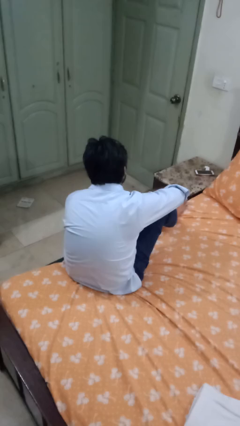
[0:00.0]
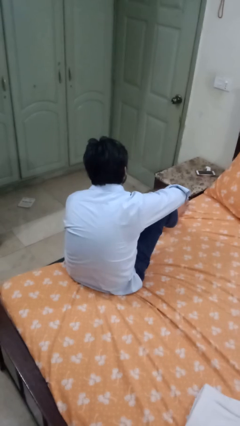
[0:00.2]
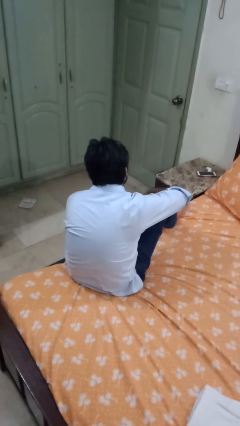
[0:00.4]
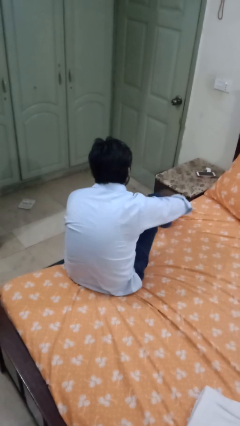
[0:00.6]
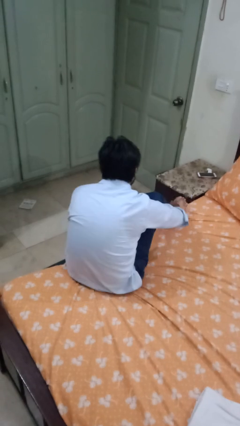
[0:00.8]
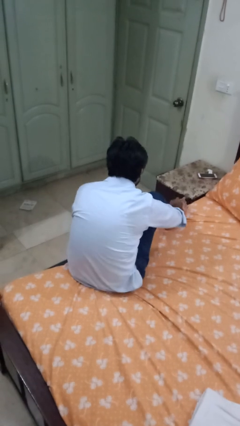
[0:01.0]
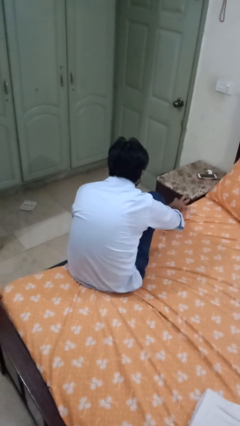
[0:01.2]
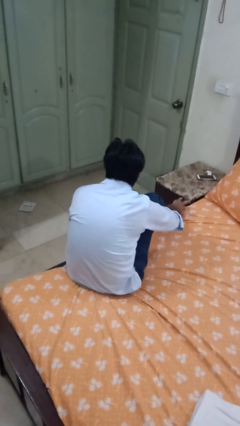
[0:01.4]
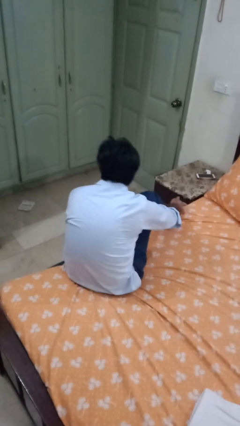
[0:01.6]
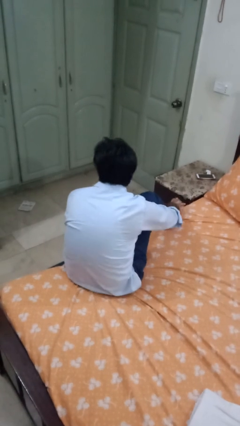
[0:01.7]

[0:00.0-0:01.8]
person rubs foot

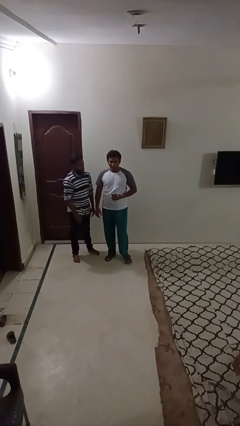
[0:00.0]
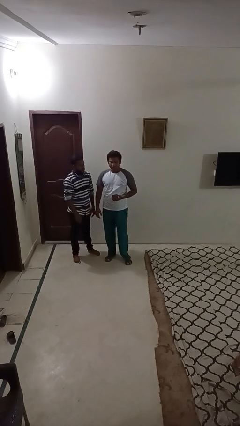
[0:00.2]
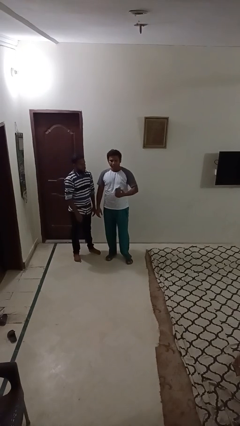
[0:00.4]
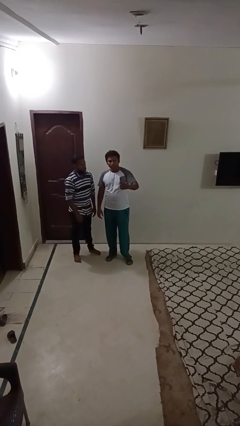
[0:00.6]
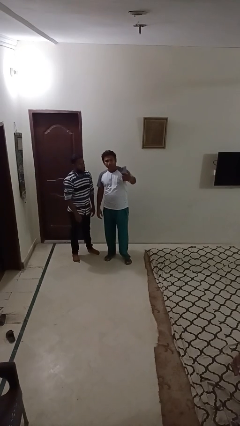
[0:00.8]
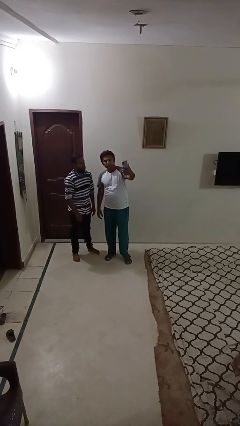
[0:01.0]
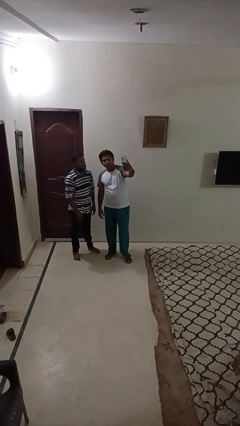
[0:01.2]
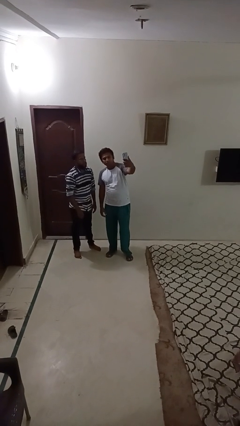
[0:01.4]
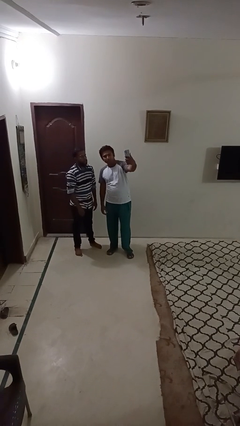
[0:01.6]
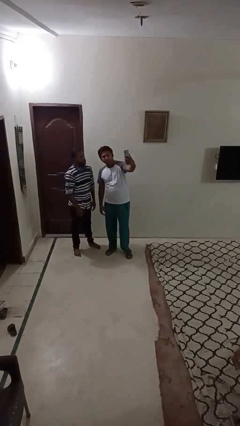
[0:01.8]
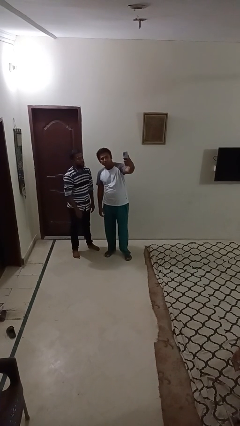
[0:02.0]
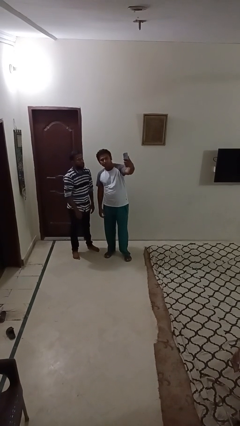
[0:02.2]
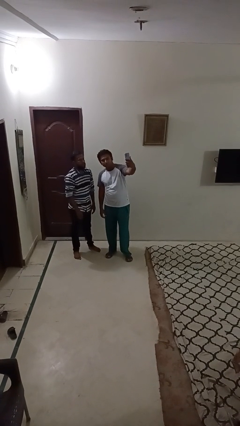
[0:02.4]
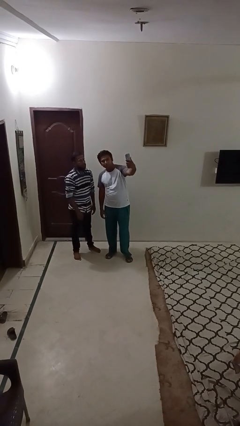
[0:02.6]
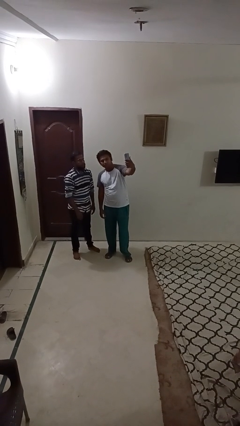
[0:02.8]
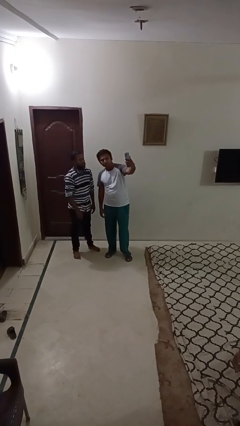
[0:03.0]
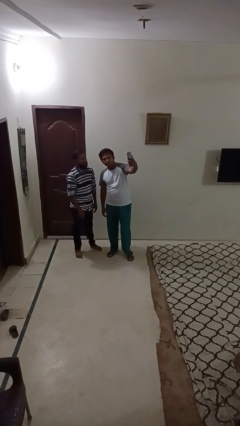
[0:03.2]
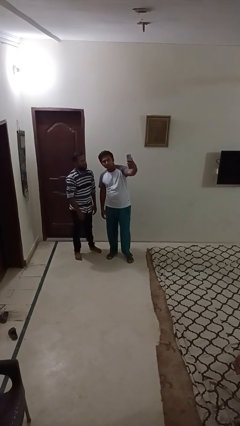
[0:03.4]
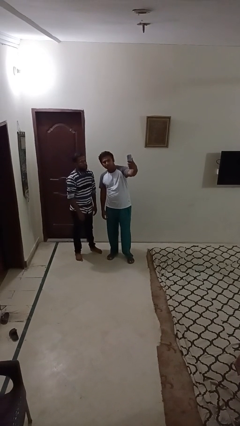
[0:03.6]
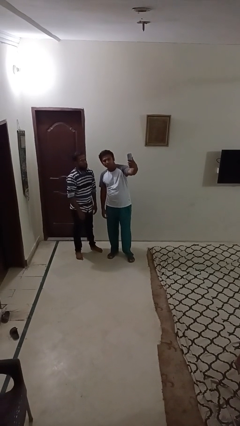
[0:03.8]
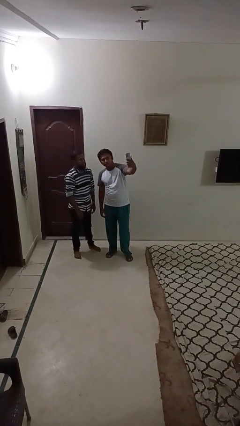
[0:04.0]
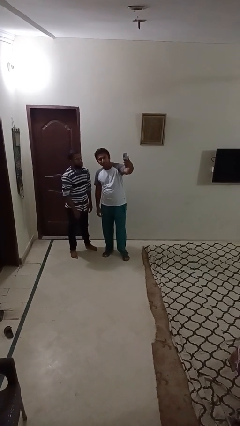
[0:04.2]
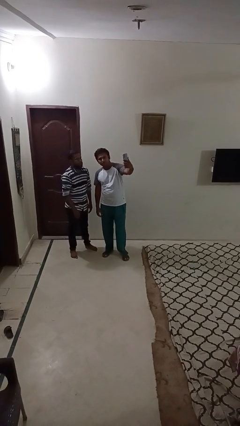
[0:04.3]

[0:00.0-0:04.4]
person takes selfie with person

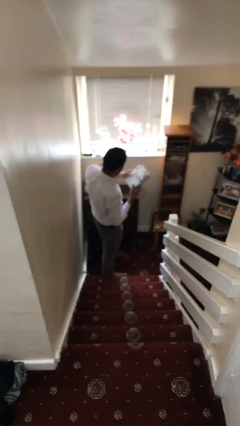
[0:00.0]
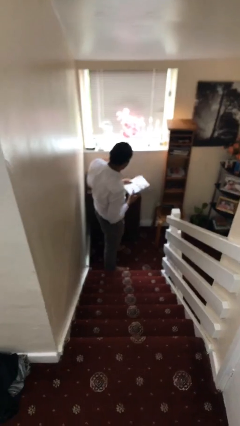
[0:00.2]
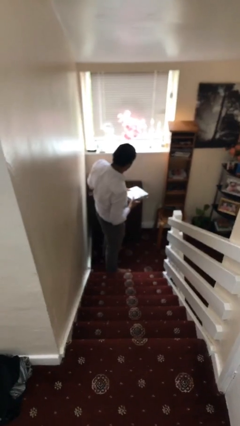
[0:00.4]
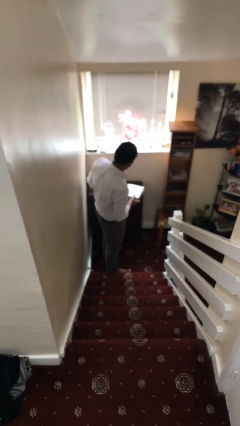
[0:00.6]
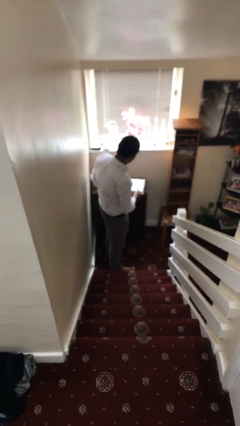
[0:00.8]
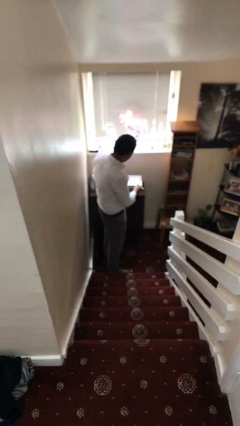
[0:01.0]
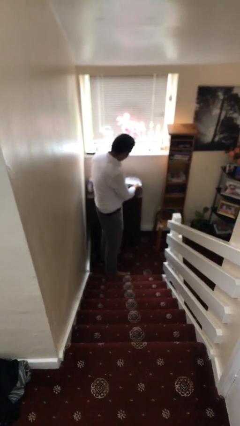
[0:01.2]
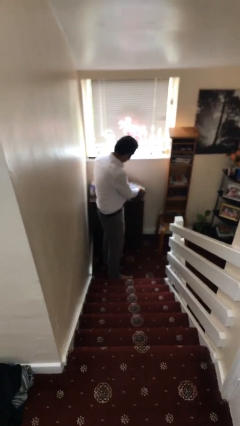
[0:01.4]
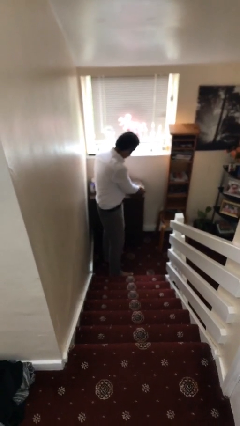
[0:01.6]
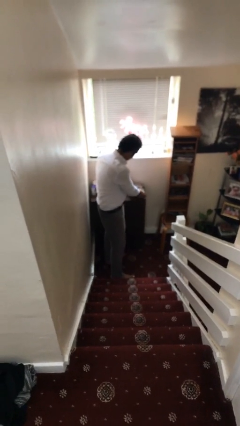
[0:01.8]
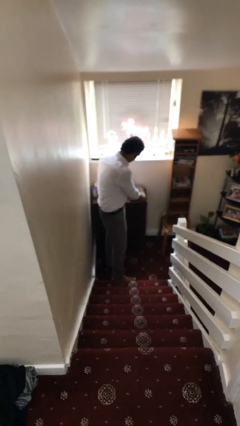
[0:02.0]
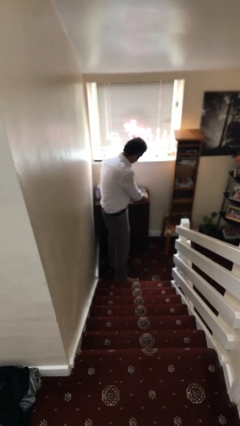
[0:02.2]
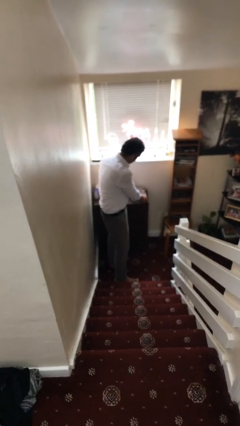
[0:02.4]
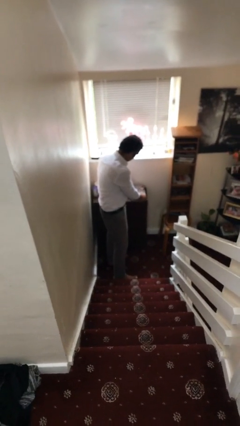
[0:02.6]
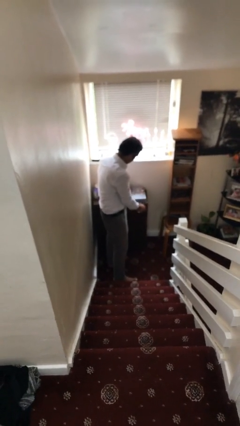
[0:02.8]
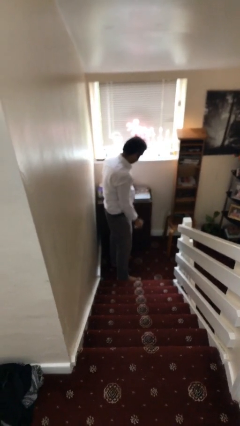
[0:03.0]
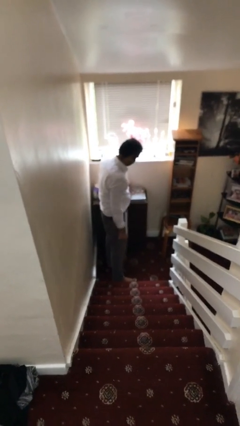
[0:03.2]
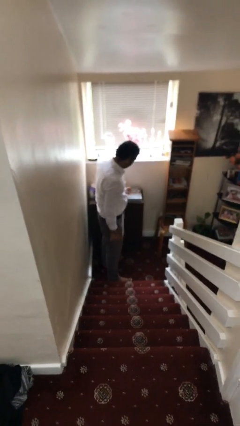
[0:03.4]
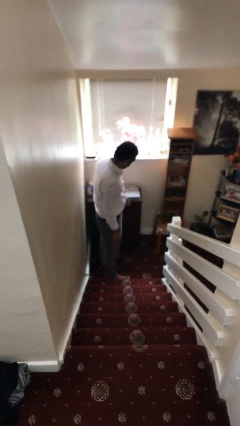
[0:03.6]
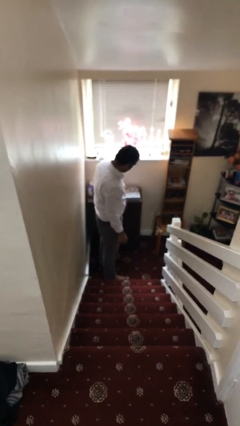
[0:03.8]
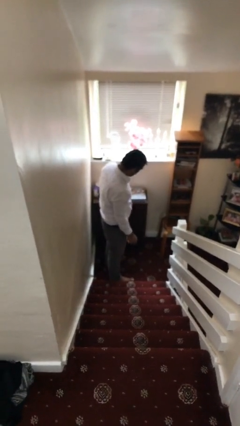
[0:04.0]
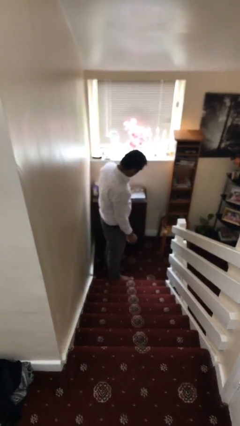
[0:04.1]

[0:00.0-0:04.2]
person puts down object on table

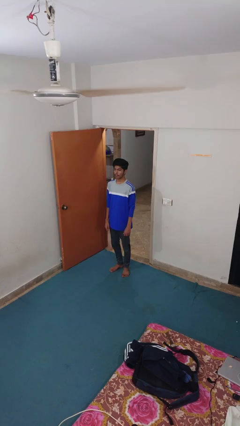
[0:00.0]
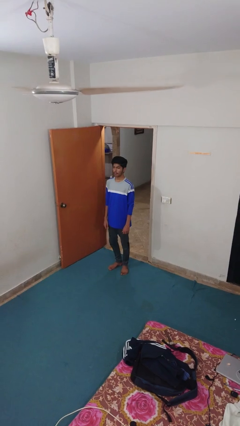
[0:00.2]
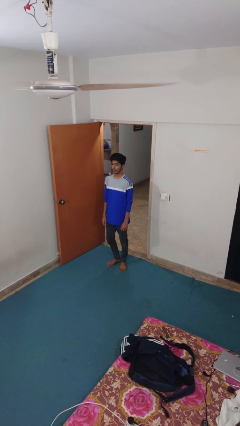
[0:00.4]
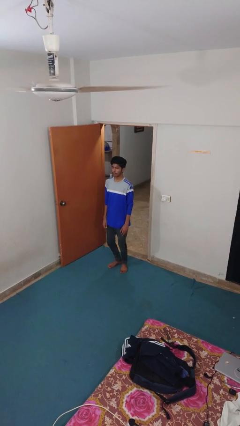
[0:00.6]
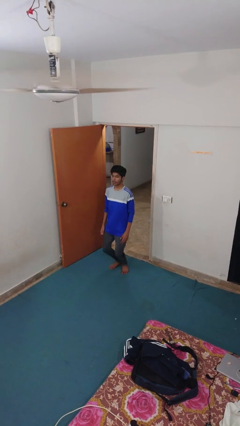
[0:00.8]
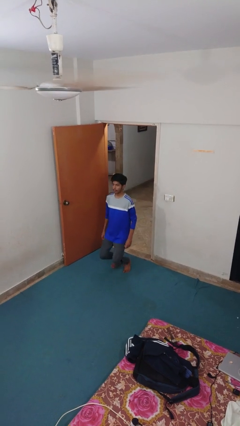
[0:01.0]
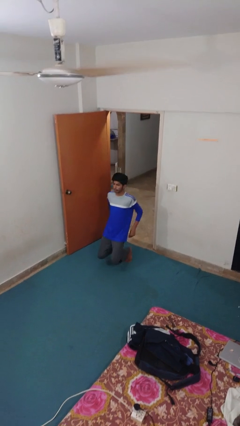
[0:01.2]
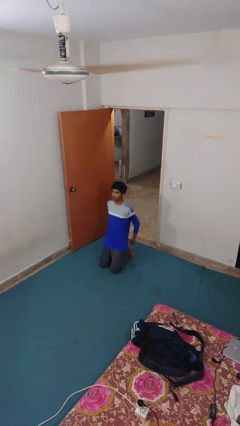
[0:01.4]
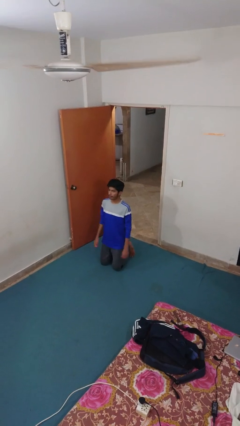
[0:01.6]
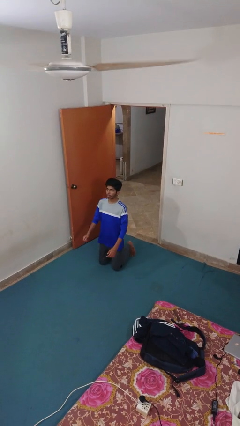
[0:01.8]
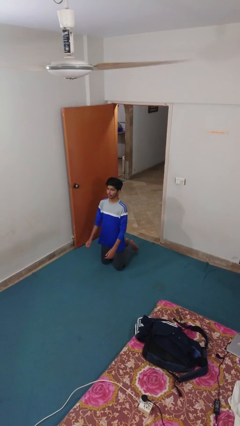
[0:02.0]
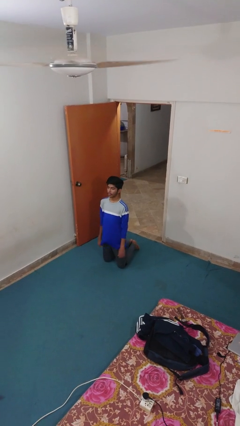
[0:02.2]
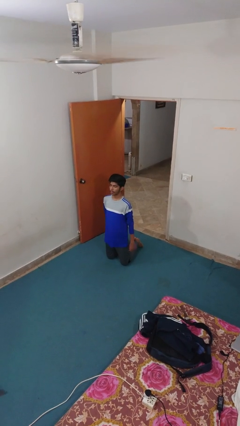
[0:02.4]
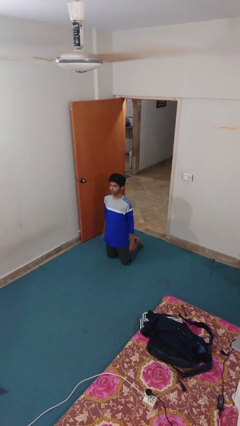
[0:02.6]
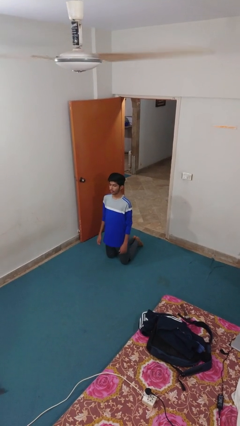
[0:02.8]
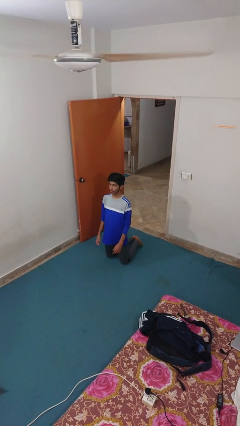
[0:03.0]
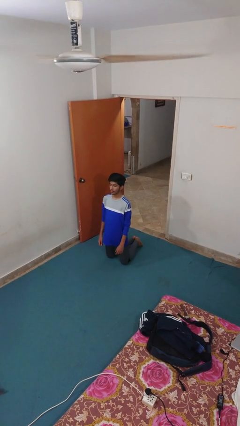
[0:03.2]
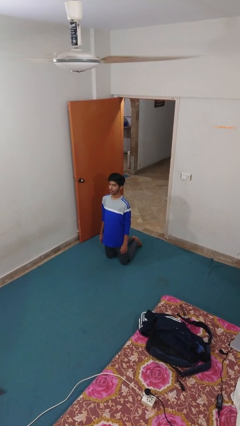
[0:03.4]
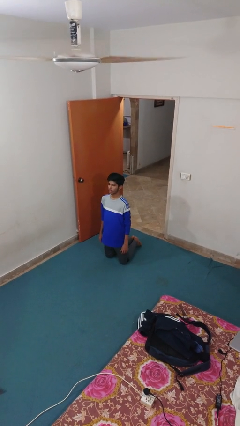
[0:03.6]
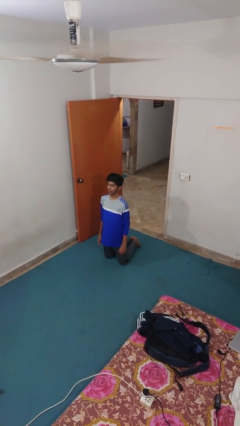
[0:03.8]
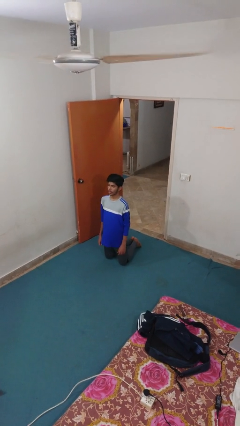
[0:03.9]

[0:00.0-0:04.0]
person kneels

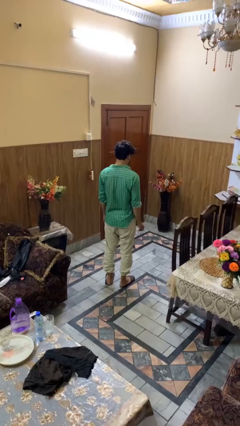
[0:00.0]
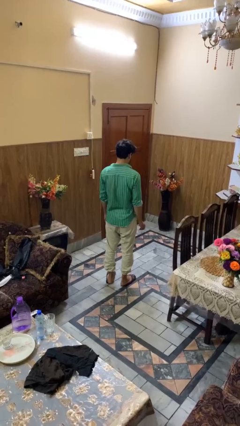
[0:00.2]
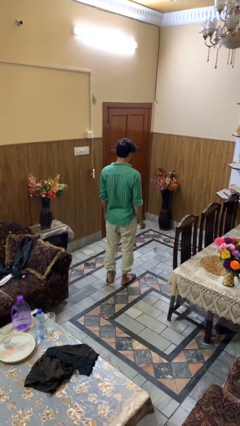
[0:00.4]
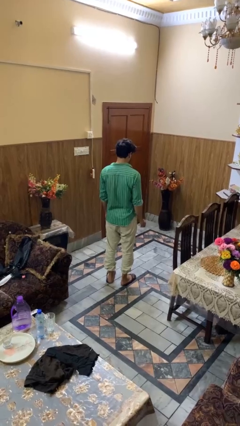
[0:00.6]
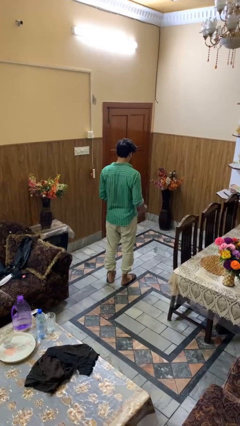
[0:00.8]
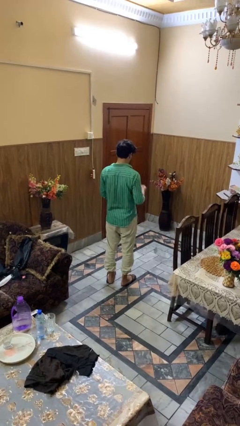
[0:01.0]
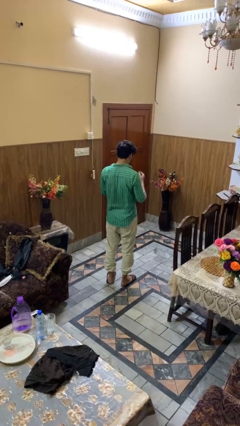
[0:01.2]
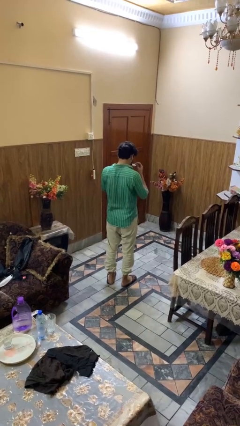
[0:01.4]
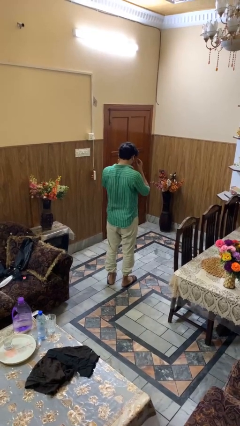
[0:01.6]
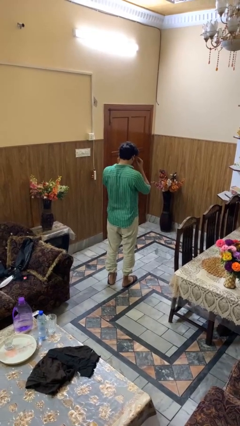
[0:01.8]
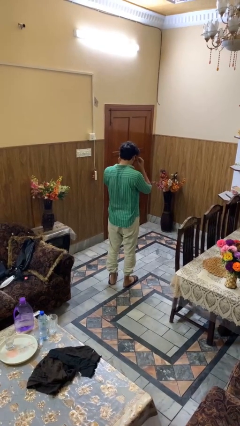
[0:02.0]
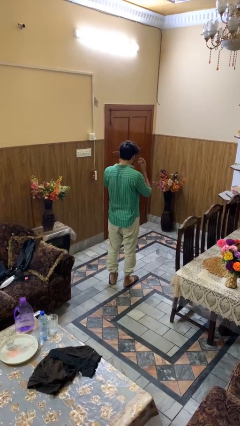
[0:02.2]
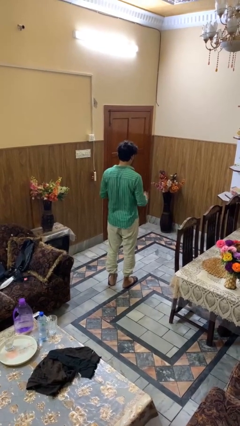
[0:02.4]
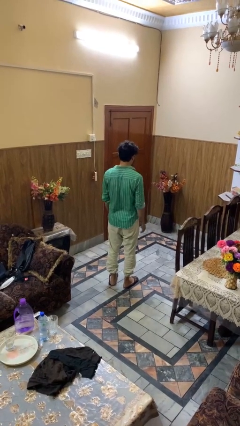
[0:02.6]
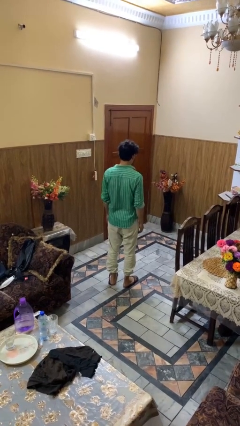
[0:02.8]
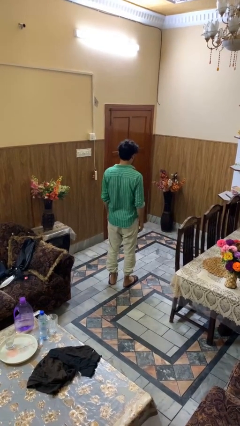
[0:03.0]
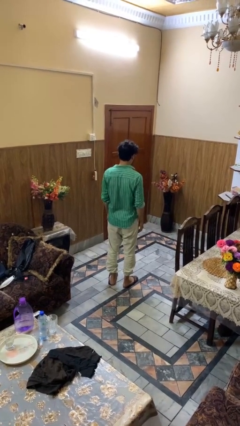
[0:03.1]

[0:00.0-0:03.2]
person puts on glasses

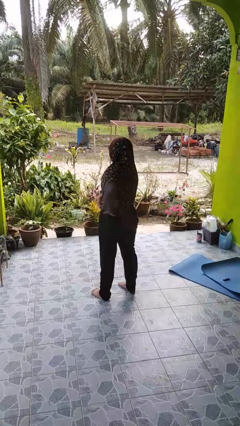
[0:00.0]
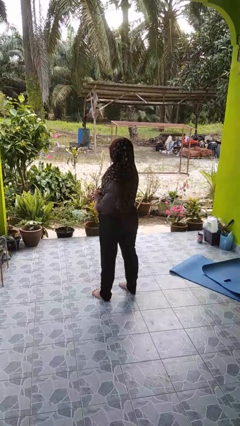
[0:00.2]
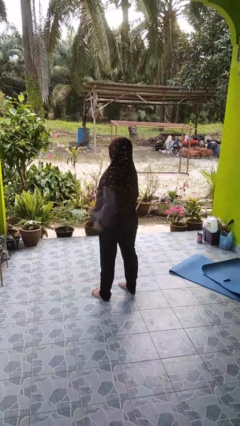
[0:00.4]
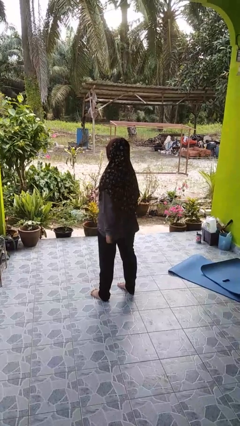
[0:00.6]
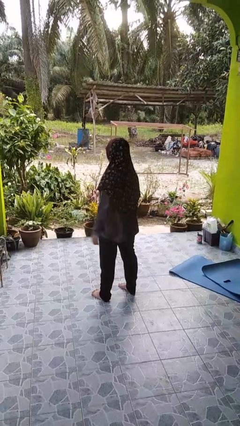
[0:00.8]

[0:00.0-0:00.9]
person untucks shirt
